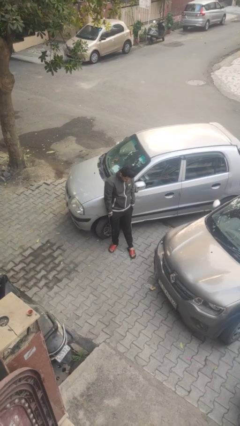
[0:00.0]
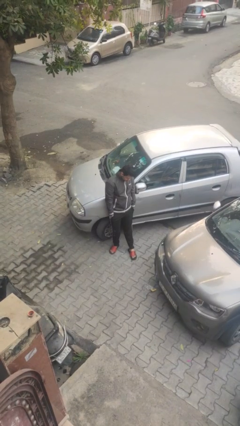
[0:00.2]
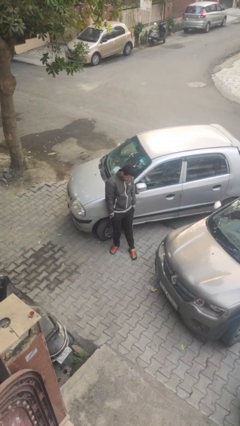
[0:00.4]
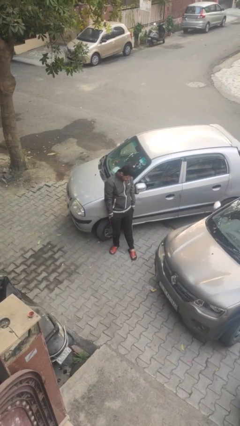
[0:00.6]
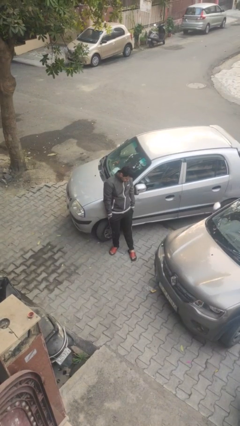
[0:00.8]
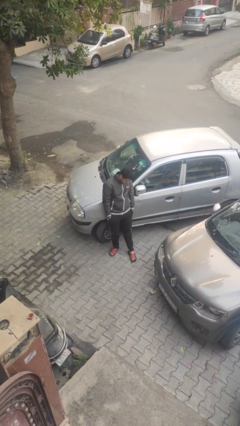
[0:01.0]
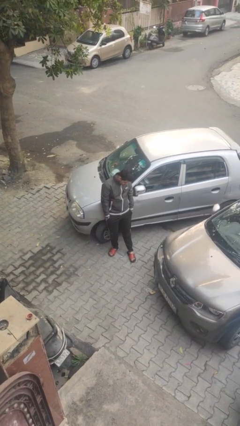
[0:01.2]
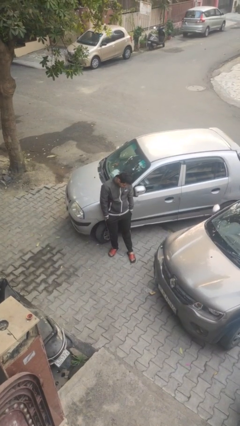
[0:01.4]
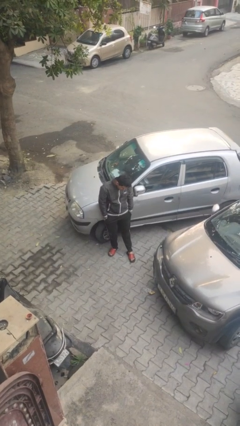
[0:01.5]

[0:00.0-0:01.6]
person leans against car

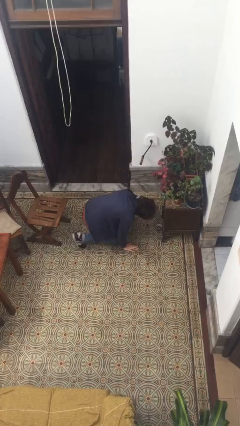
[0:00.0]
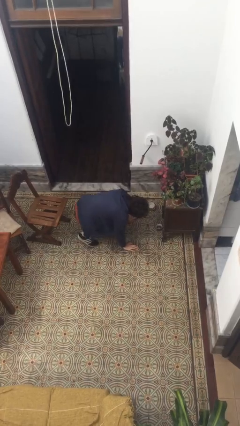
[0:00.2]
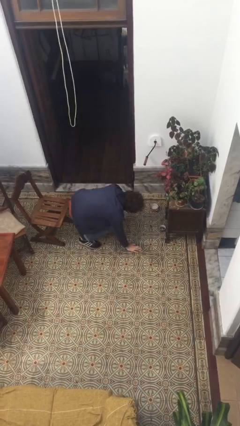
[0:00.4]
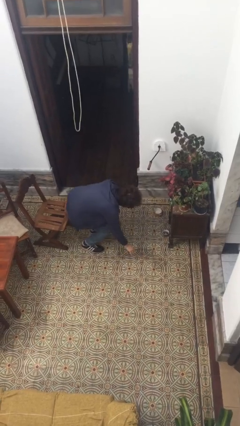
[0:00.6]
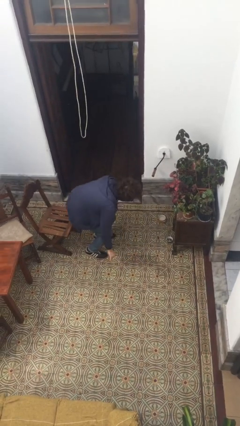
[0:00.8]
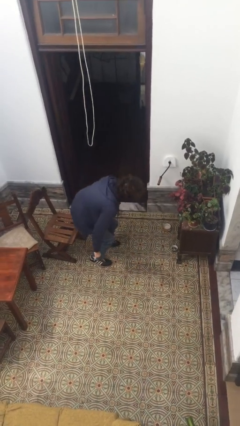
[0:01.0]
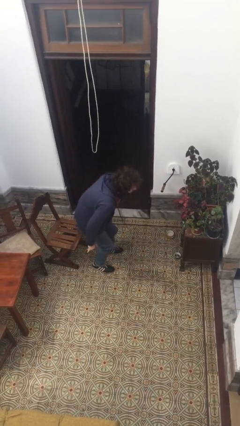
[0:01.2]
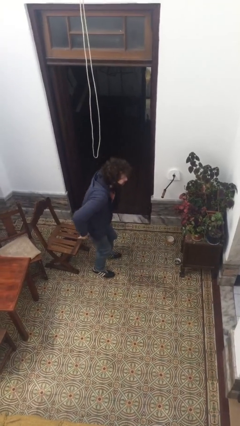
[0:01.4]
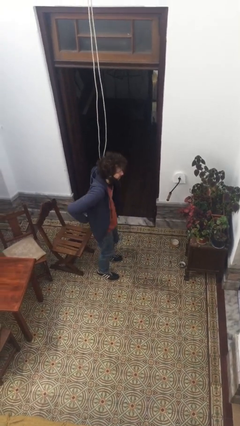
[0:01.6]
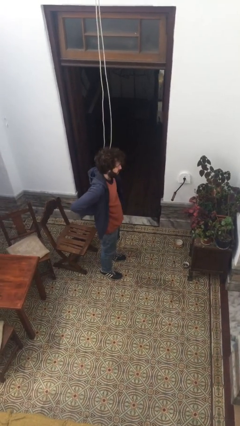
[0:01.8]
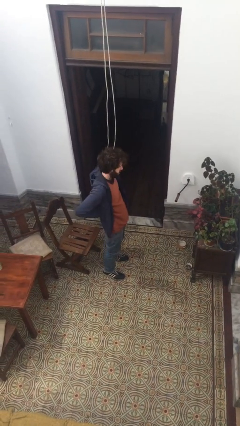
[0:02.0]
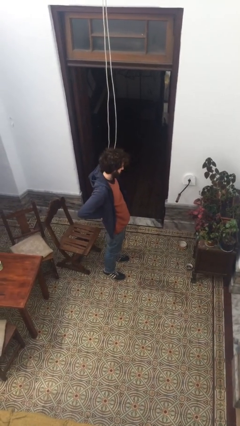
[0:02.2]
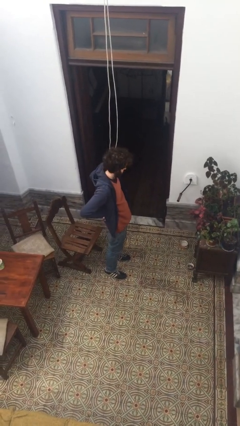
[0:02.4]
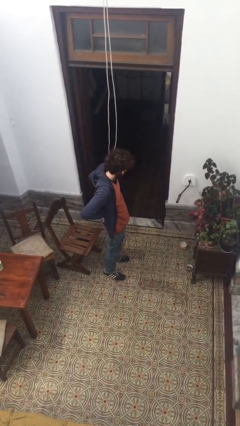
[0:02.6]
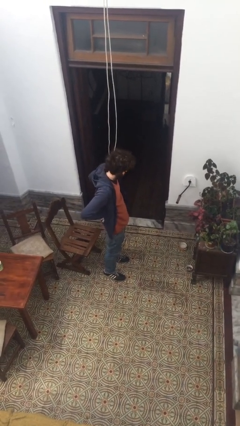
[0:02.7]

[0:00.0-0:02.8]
person stands up from floor

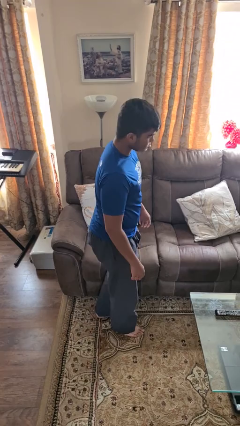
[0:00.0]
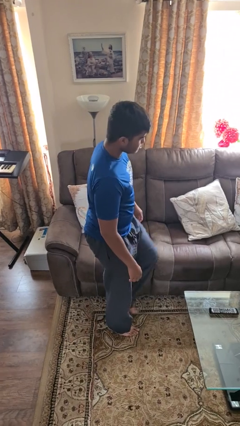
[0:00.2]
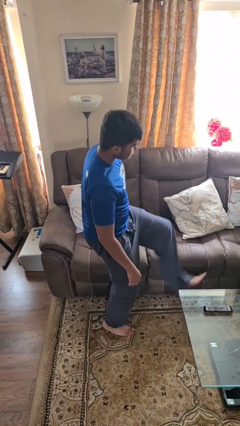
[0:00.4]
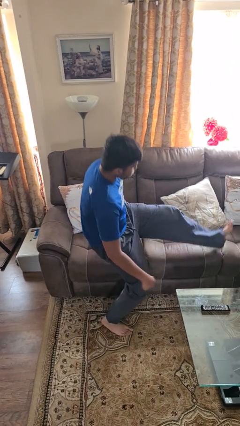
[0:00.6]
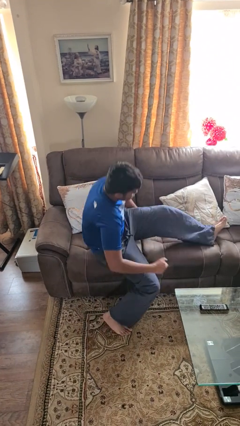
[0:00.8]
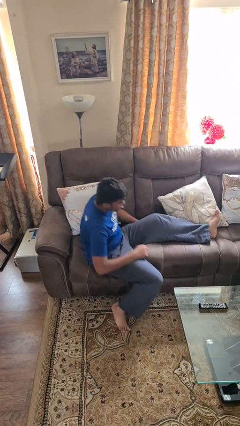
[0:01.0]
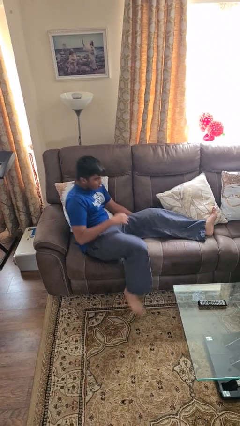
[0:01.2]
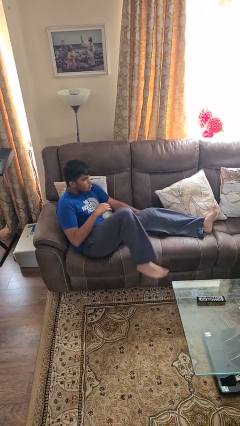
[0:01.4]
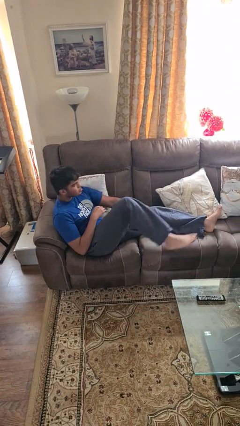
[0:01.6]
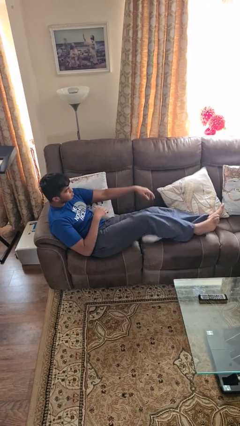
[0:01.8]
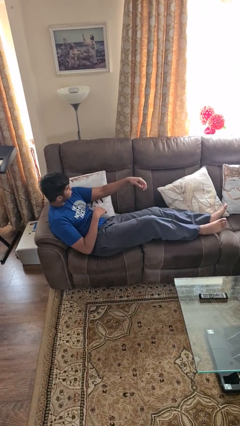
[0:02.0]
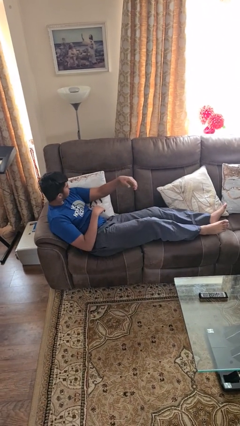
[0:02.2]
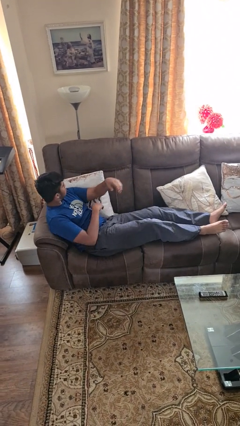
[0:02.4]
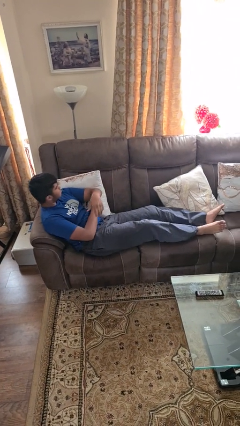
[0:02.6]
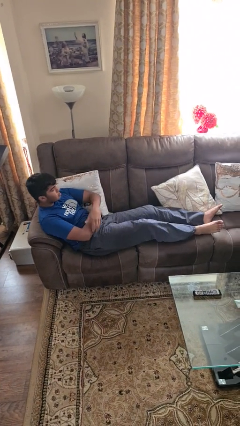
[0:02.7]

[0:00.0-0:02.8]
person lies down on couch

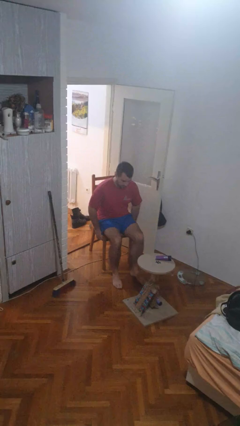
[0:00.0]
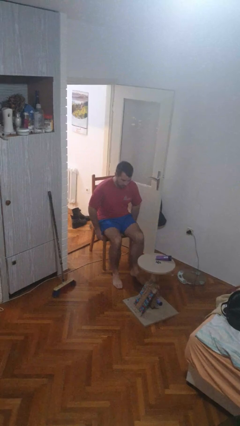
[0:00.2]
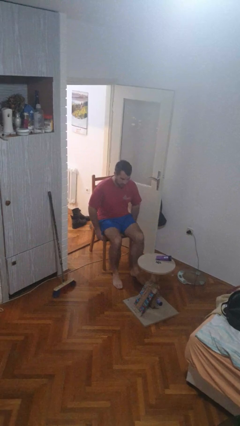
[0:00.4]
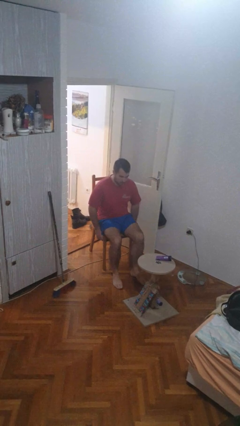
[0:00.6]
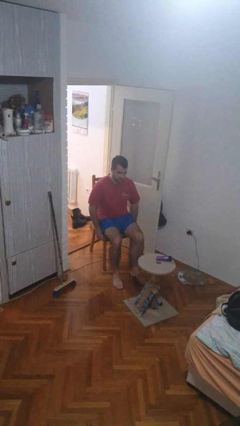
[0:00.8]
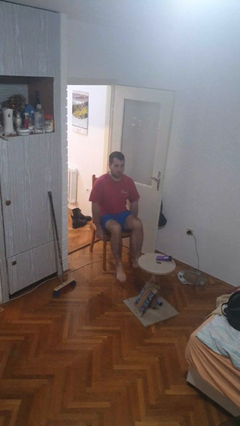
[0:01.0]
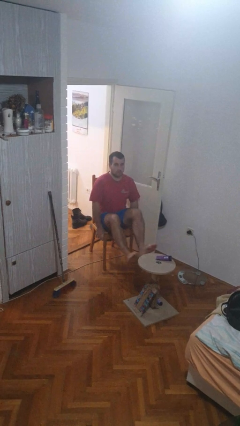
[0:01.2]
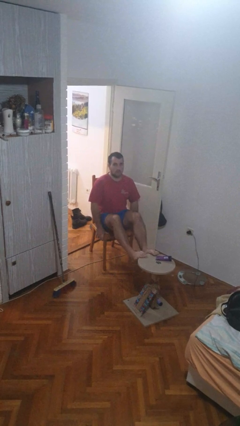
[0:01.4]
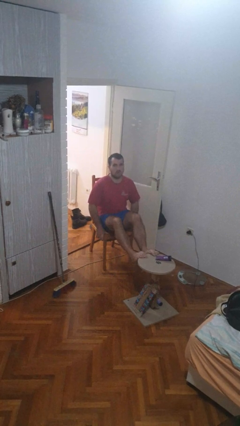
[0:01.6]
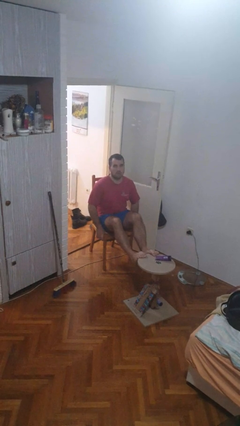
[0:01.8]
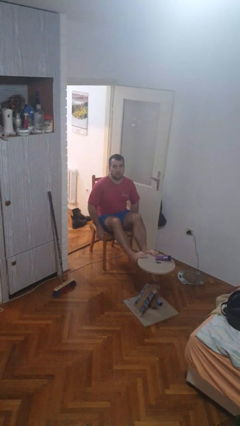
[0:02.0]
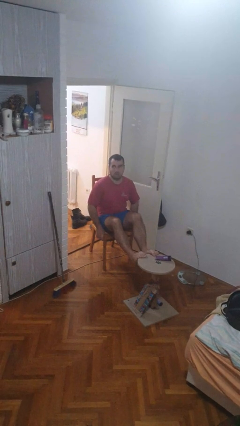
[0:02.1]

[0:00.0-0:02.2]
person puts feet up

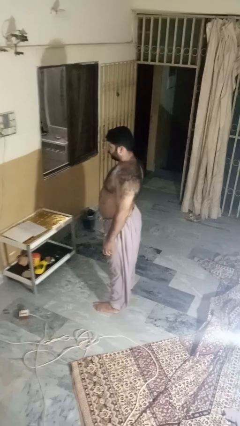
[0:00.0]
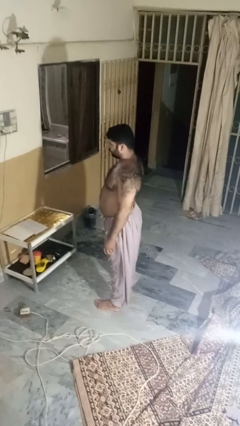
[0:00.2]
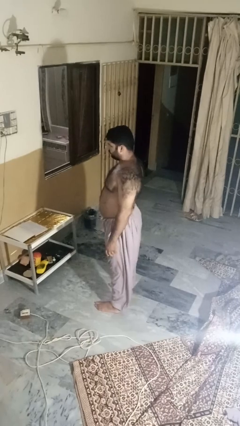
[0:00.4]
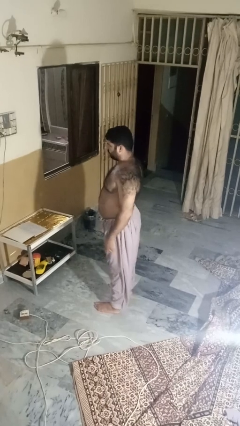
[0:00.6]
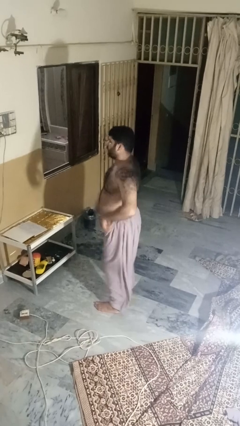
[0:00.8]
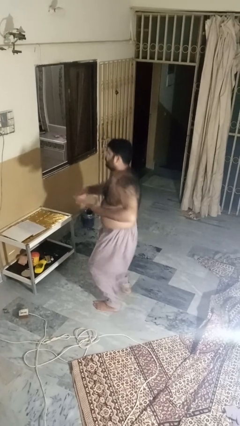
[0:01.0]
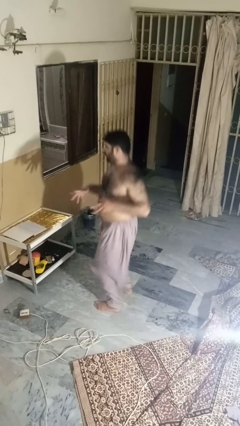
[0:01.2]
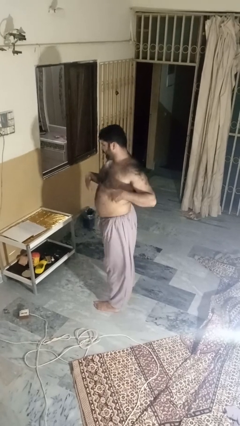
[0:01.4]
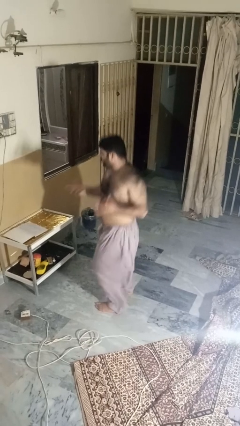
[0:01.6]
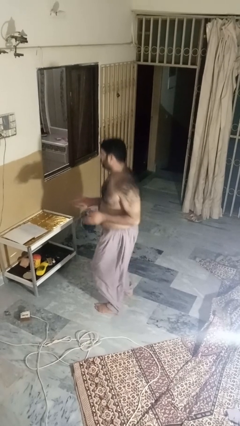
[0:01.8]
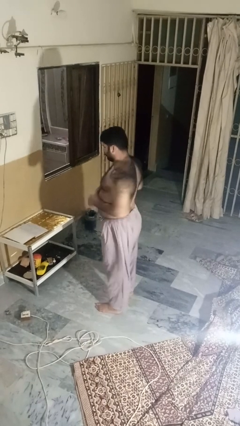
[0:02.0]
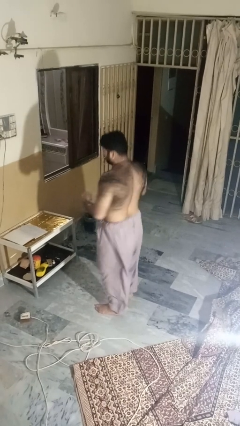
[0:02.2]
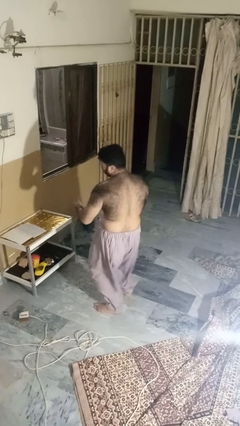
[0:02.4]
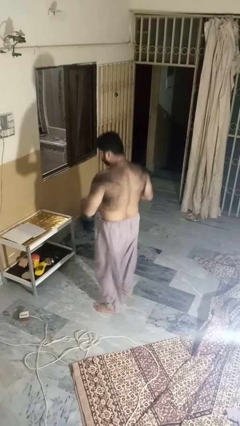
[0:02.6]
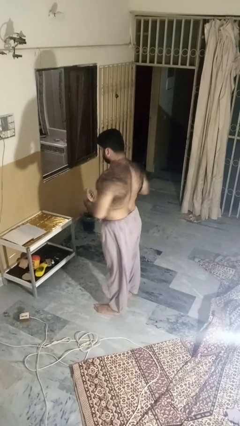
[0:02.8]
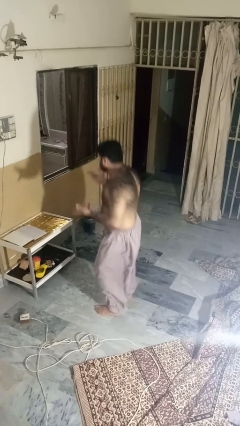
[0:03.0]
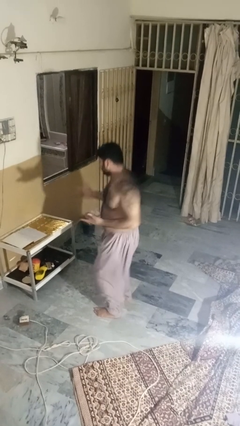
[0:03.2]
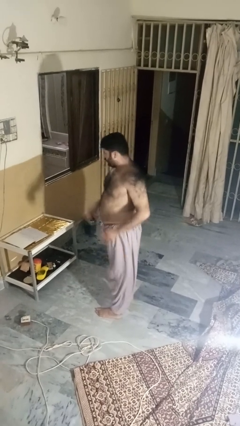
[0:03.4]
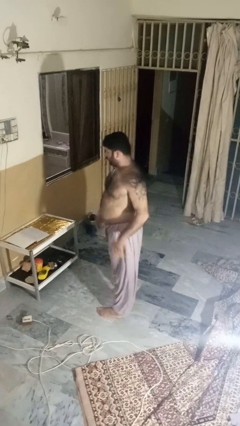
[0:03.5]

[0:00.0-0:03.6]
person dances in place

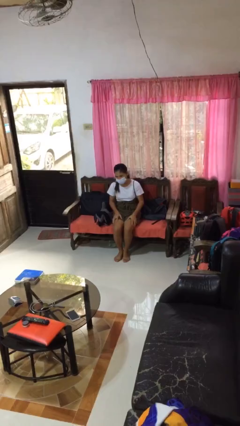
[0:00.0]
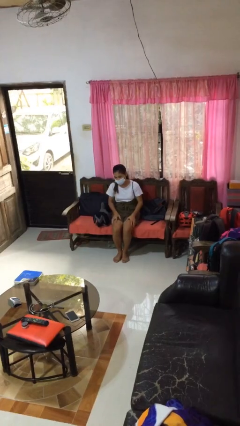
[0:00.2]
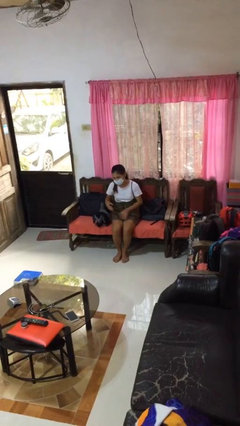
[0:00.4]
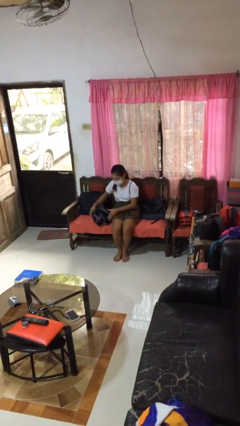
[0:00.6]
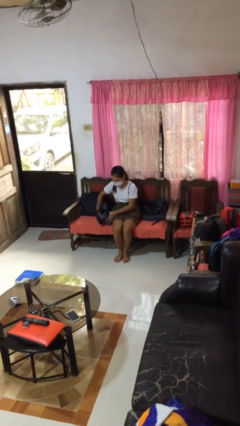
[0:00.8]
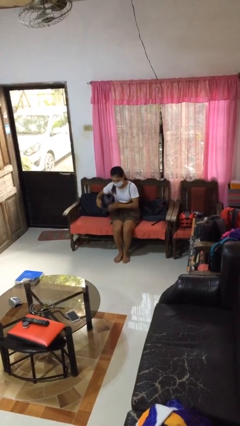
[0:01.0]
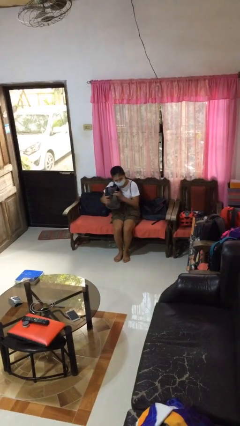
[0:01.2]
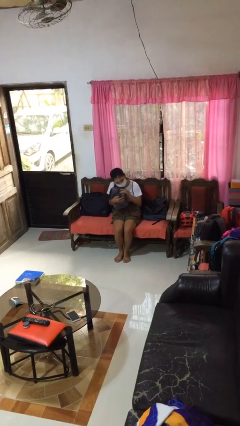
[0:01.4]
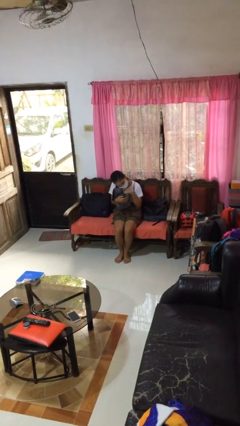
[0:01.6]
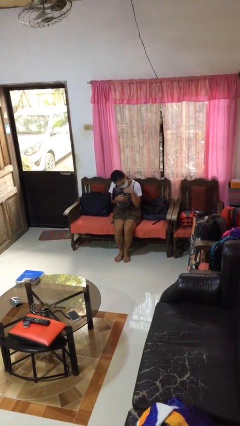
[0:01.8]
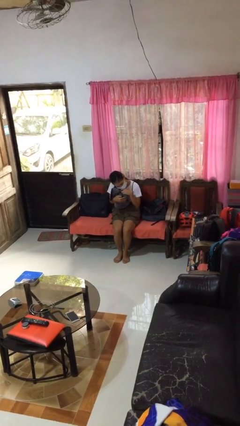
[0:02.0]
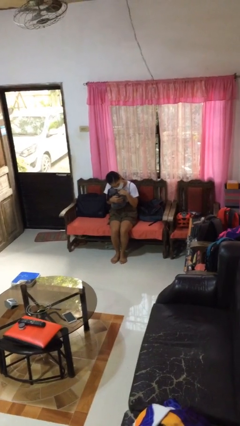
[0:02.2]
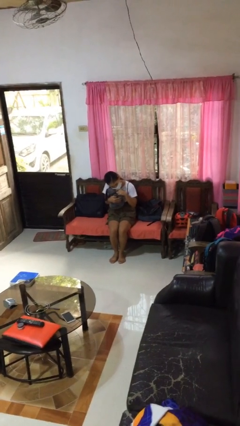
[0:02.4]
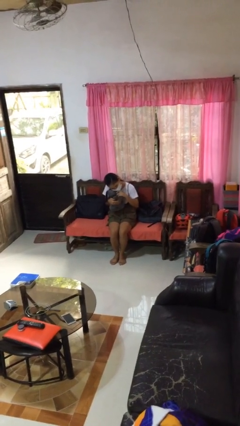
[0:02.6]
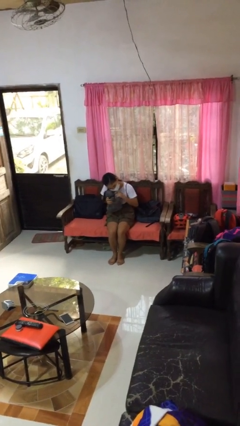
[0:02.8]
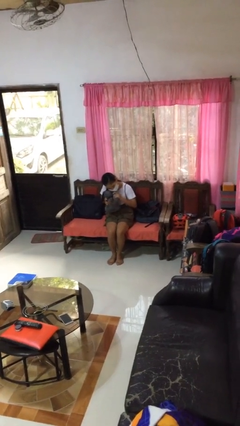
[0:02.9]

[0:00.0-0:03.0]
person hugs stuffed animal

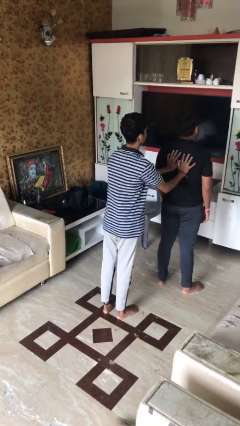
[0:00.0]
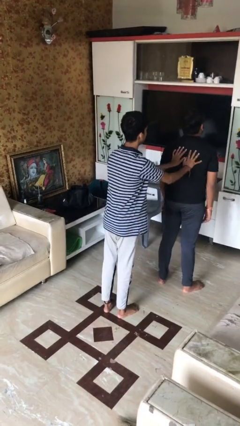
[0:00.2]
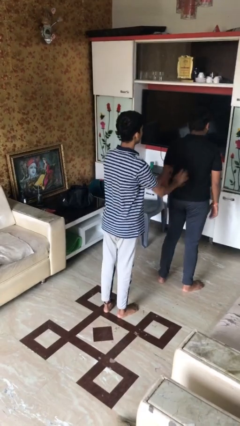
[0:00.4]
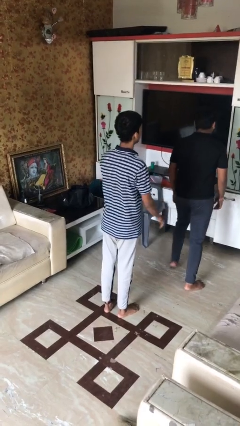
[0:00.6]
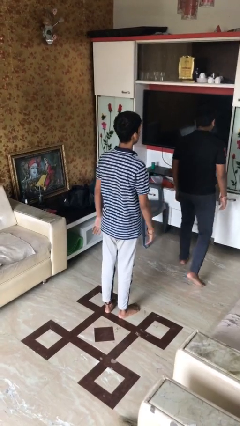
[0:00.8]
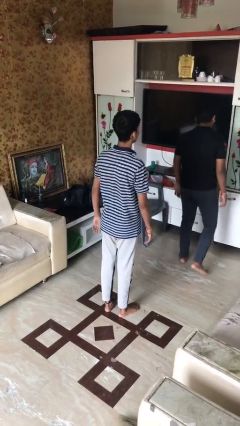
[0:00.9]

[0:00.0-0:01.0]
person shoves person

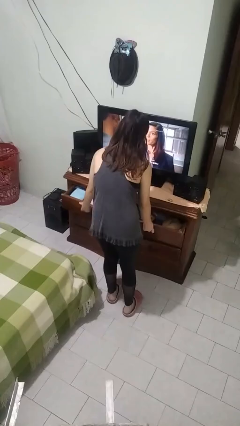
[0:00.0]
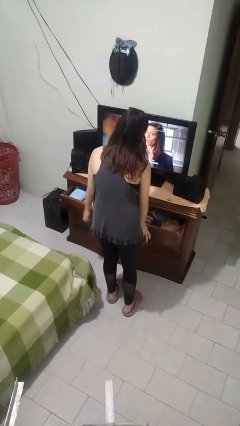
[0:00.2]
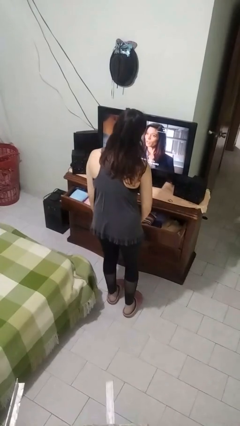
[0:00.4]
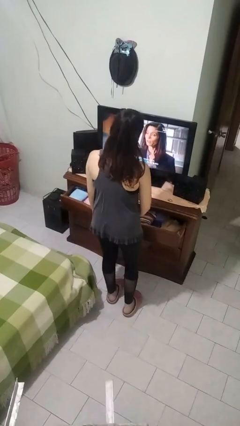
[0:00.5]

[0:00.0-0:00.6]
person opens dresser drawer
